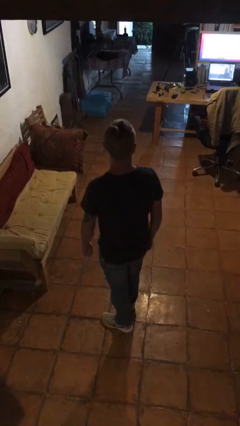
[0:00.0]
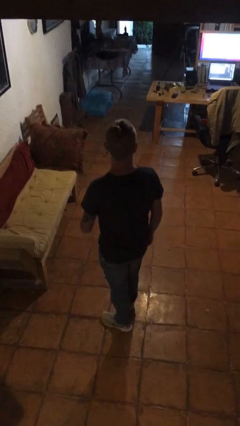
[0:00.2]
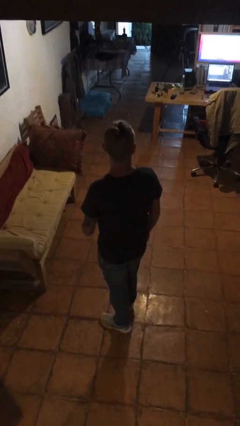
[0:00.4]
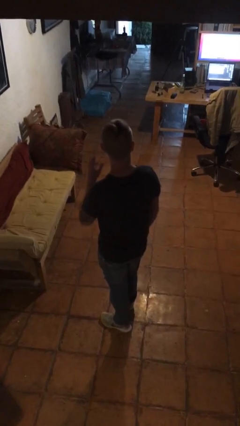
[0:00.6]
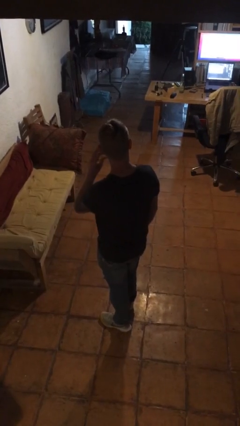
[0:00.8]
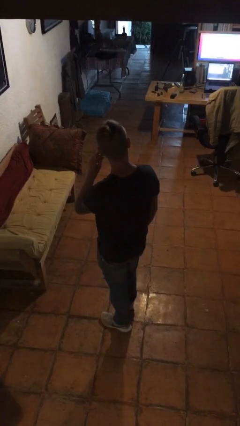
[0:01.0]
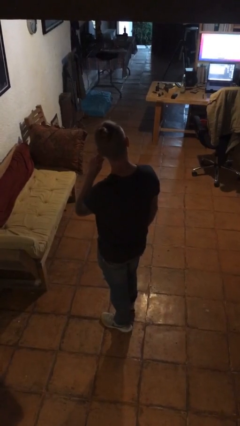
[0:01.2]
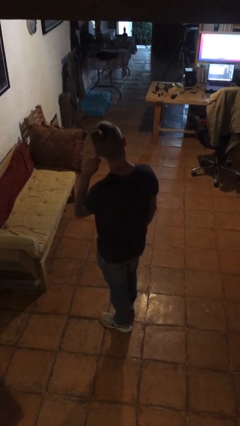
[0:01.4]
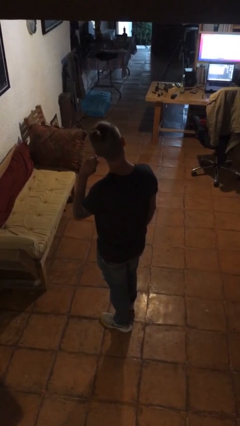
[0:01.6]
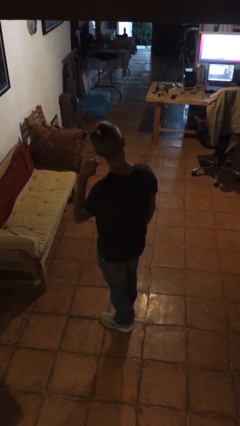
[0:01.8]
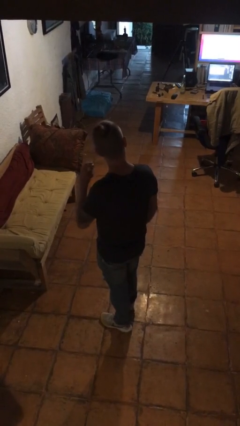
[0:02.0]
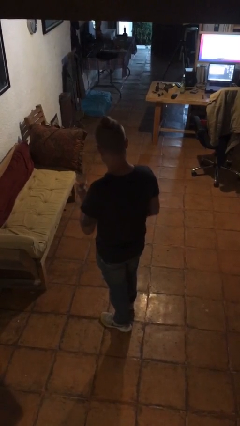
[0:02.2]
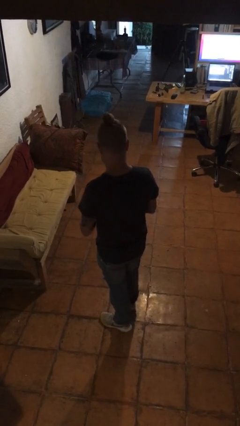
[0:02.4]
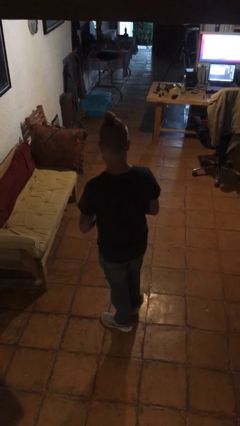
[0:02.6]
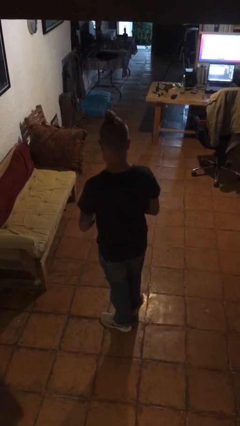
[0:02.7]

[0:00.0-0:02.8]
person takes off earrings

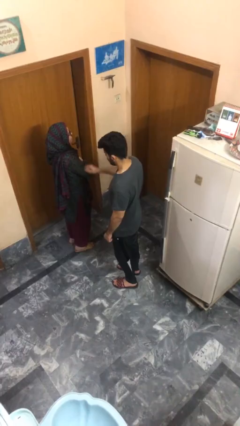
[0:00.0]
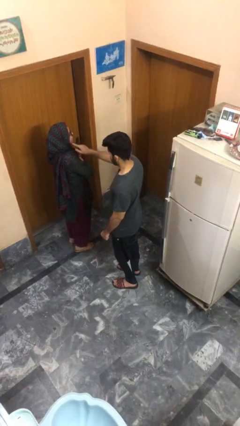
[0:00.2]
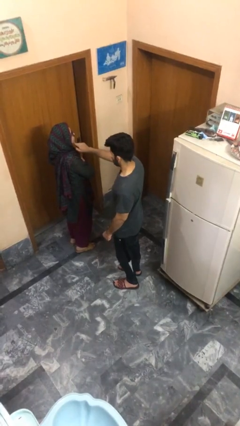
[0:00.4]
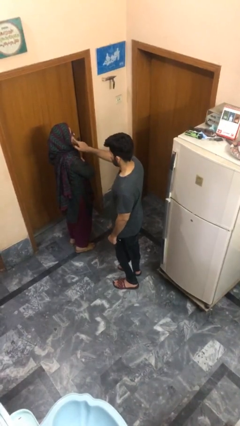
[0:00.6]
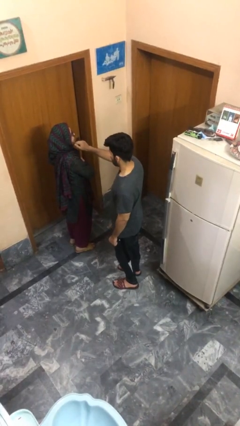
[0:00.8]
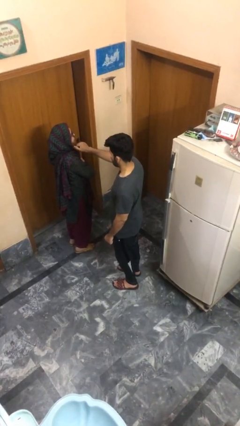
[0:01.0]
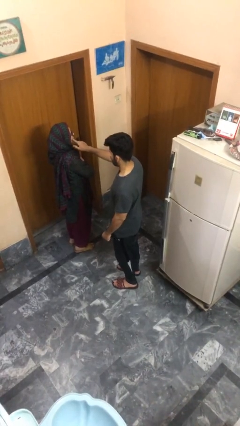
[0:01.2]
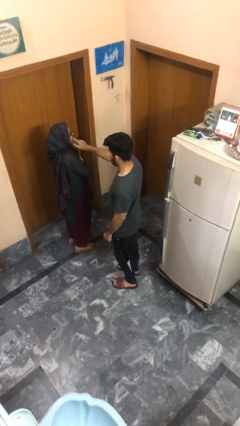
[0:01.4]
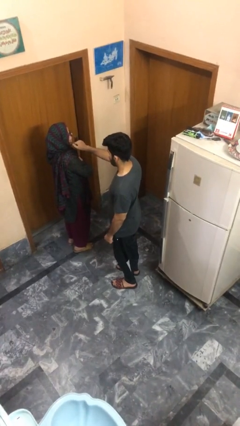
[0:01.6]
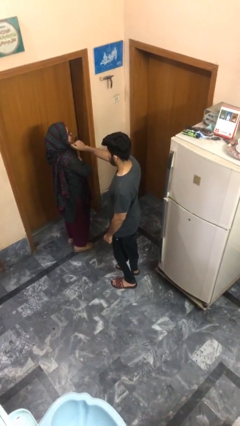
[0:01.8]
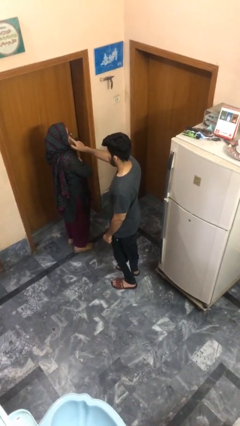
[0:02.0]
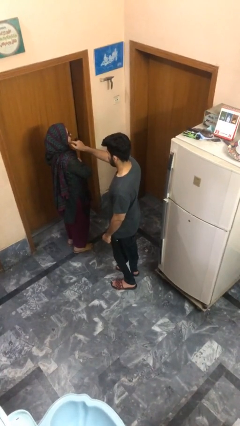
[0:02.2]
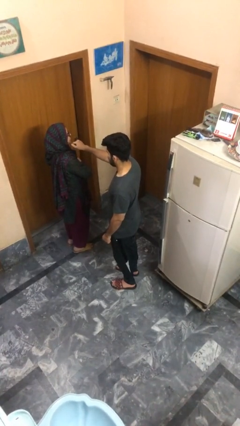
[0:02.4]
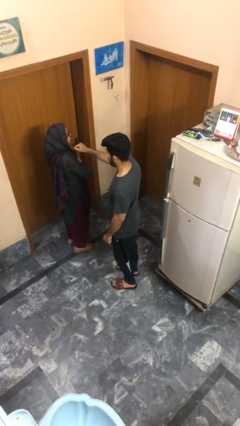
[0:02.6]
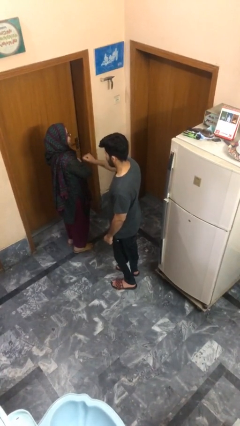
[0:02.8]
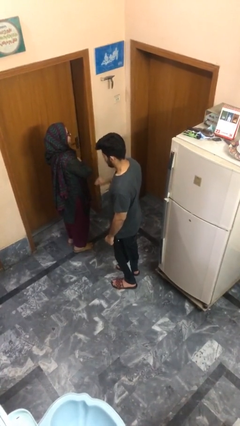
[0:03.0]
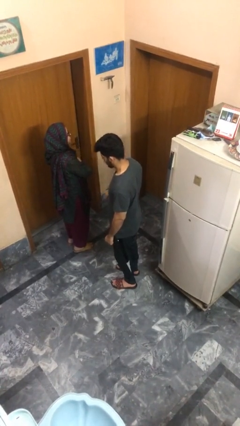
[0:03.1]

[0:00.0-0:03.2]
person touches face of person

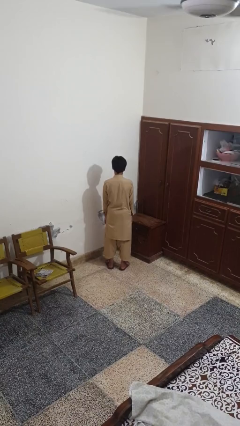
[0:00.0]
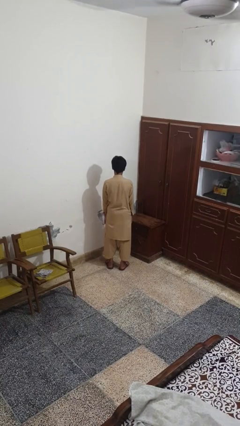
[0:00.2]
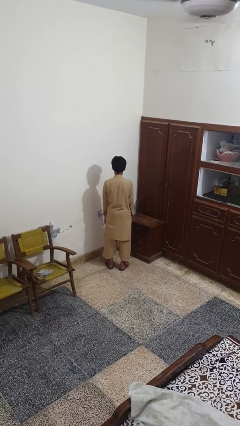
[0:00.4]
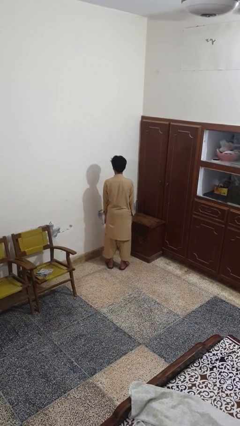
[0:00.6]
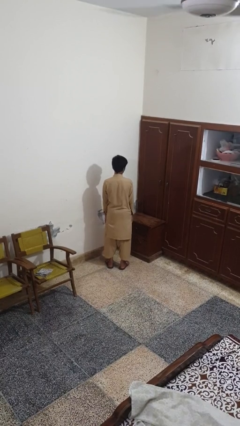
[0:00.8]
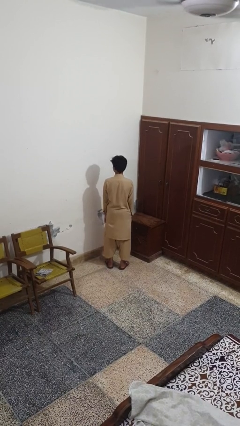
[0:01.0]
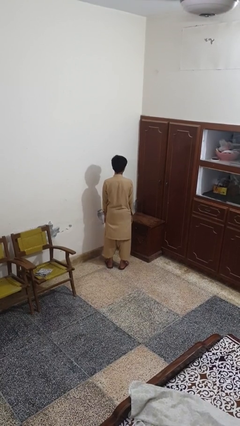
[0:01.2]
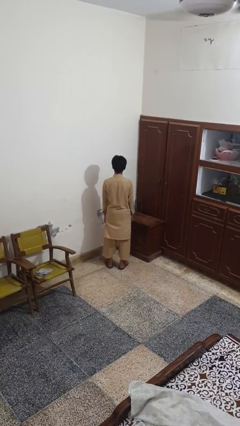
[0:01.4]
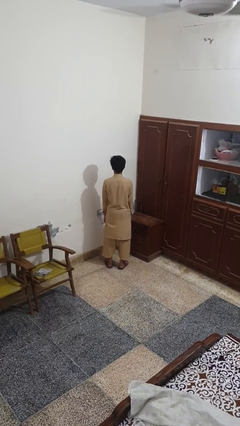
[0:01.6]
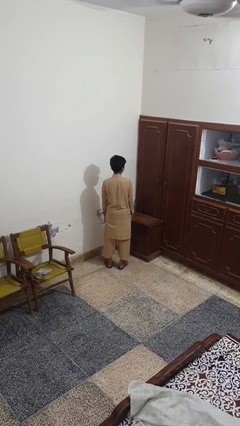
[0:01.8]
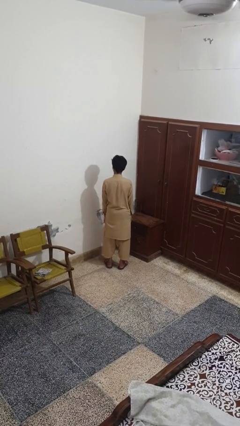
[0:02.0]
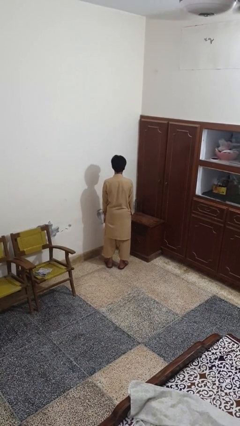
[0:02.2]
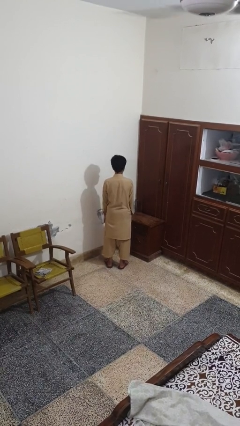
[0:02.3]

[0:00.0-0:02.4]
person shakes head

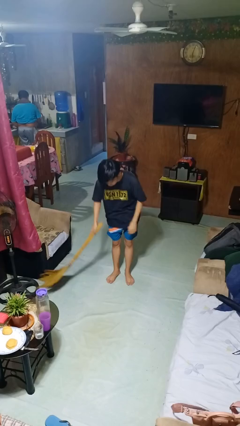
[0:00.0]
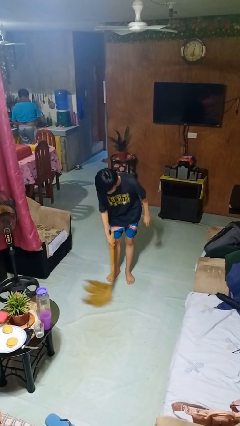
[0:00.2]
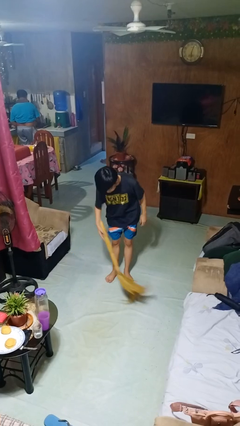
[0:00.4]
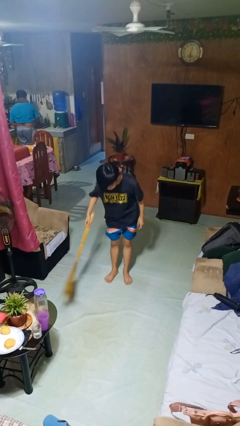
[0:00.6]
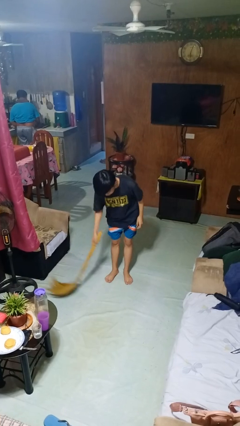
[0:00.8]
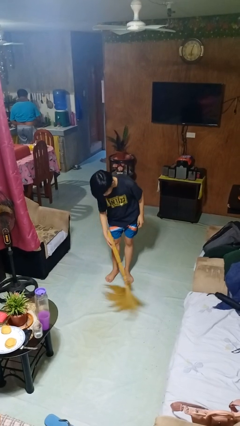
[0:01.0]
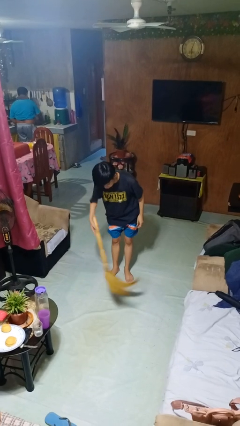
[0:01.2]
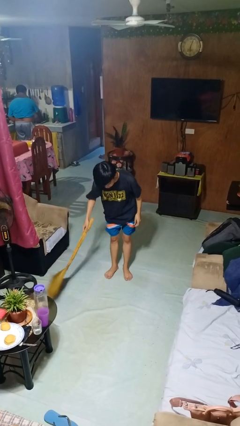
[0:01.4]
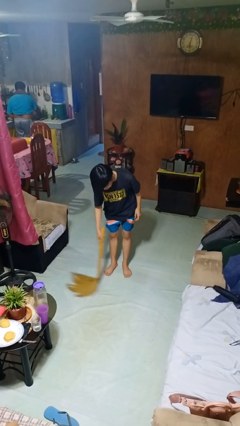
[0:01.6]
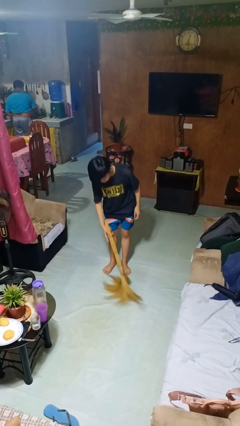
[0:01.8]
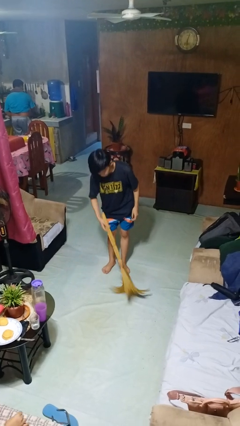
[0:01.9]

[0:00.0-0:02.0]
person sweeps floor

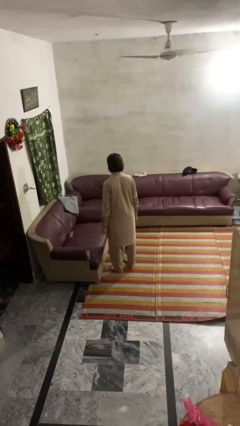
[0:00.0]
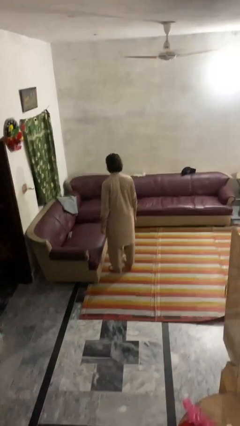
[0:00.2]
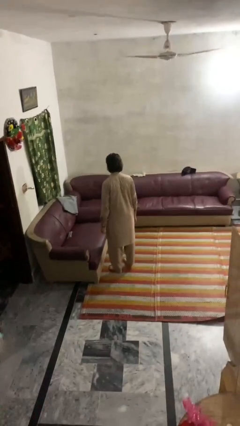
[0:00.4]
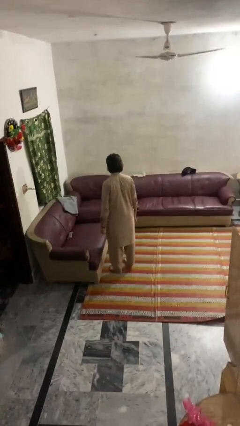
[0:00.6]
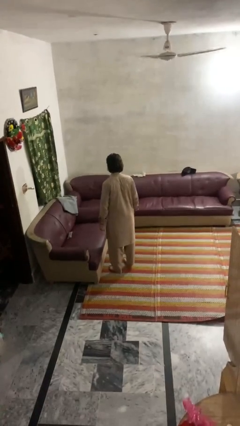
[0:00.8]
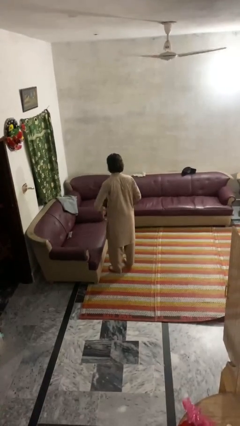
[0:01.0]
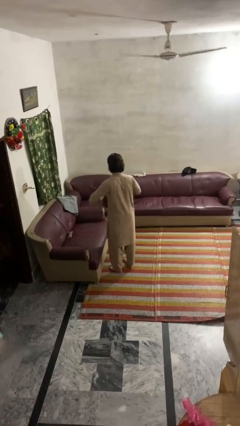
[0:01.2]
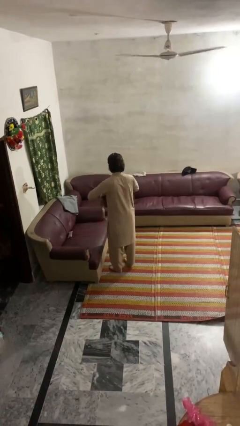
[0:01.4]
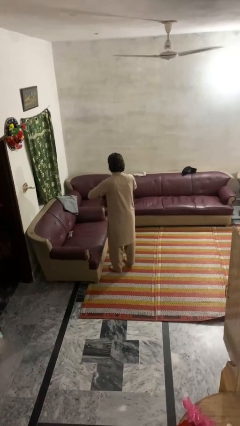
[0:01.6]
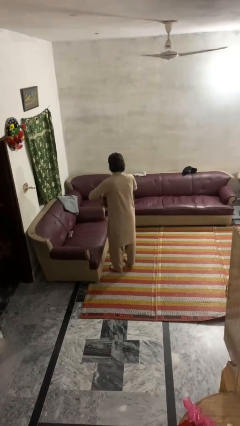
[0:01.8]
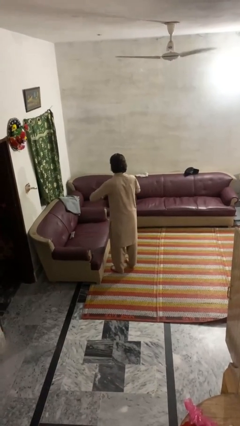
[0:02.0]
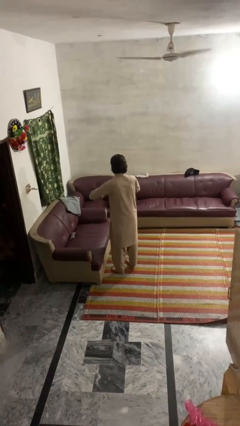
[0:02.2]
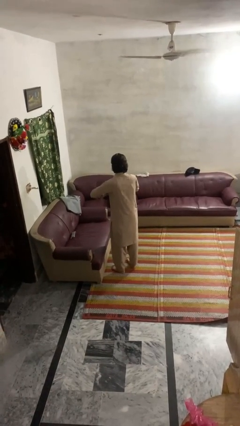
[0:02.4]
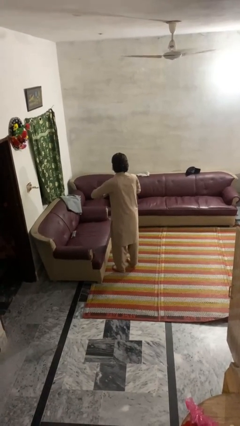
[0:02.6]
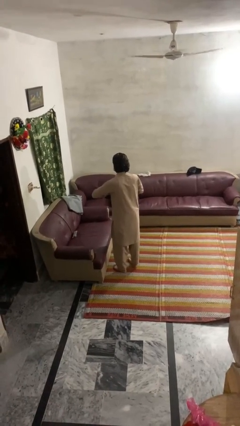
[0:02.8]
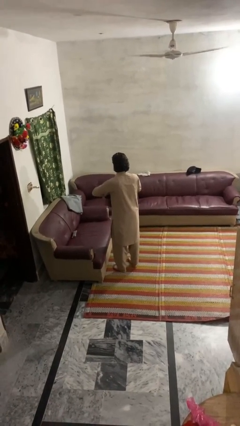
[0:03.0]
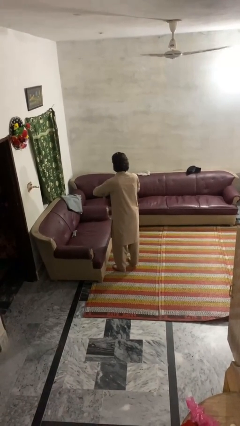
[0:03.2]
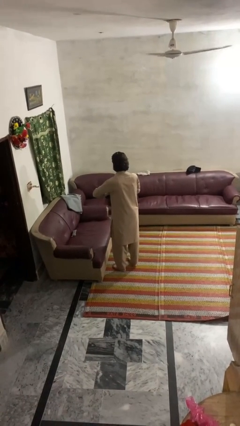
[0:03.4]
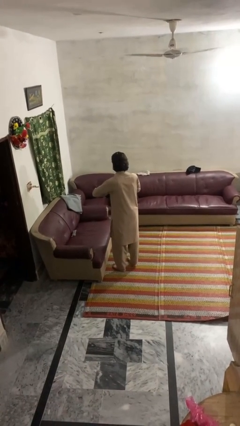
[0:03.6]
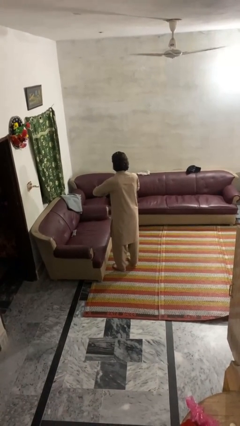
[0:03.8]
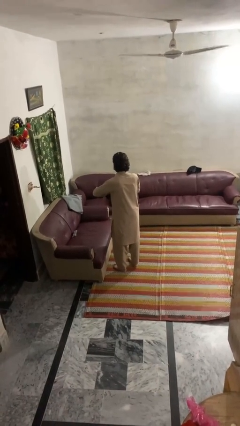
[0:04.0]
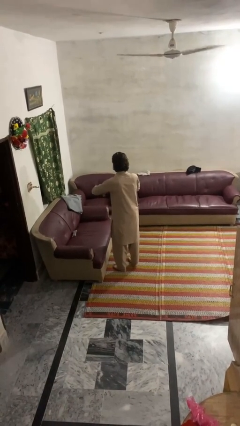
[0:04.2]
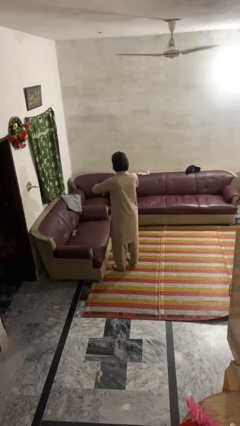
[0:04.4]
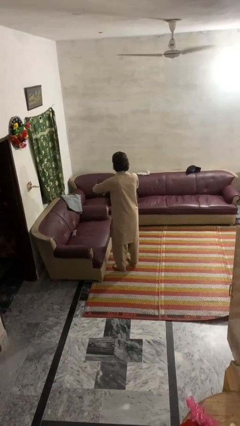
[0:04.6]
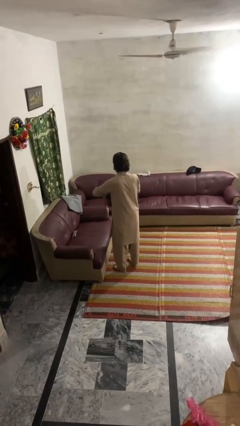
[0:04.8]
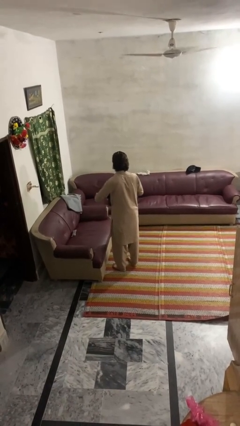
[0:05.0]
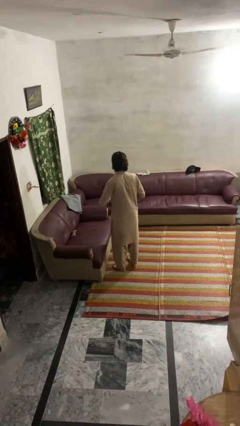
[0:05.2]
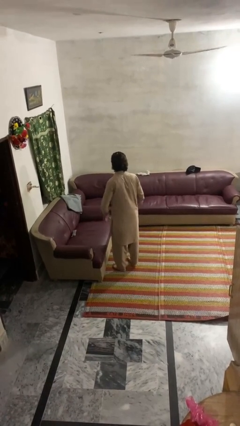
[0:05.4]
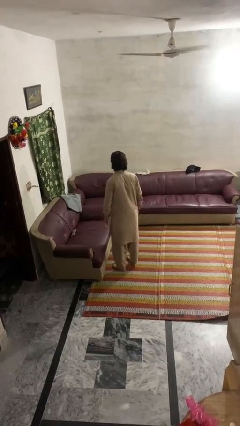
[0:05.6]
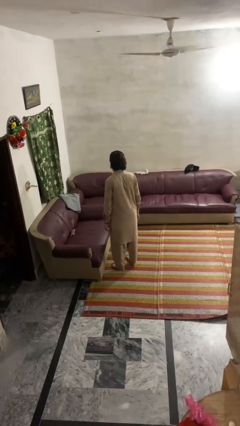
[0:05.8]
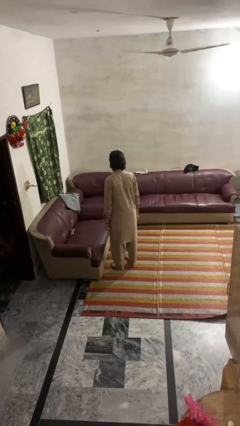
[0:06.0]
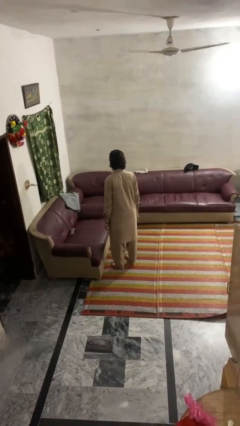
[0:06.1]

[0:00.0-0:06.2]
person cracks knuckles

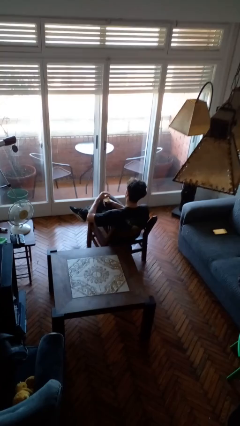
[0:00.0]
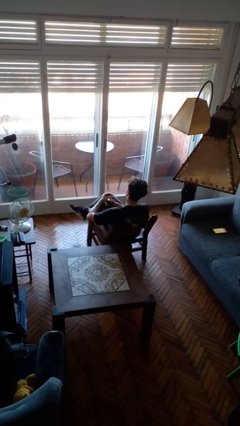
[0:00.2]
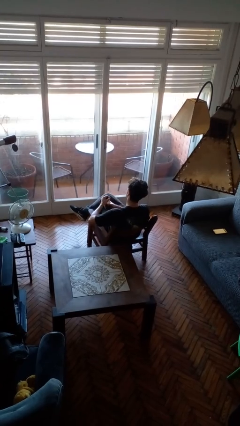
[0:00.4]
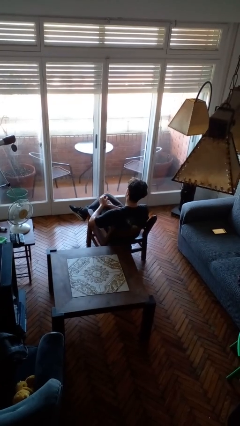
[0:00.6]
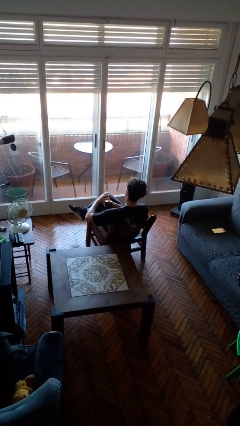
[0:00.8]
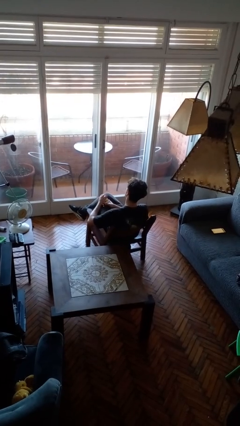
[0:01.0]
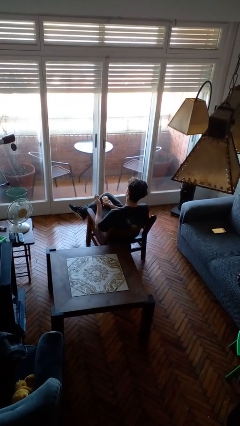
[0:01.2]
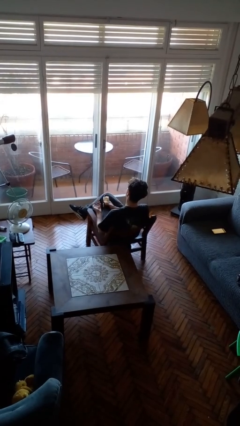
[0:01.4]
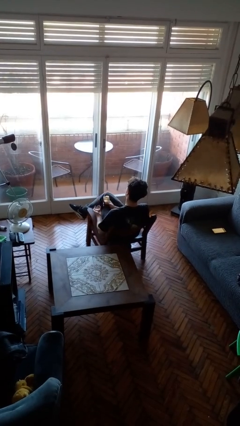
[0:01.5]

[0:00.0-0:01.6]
person opens jar
